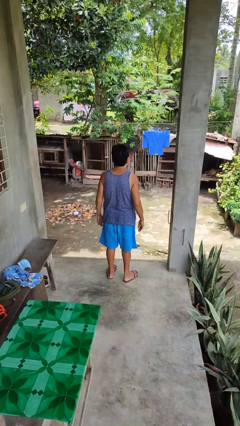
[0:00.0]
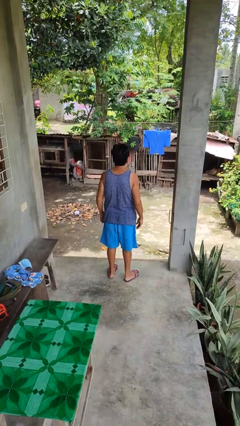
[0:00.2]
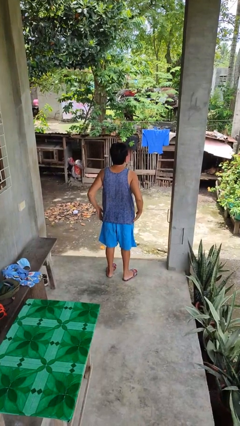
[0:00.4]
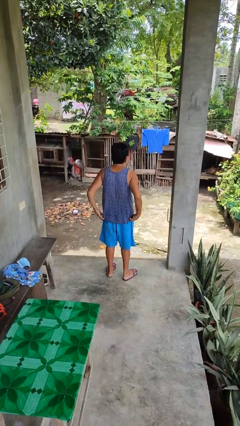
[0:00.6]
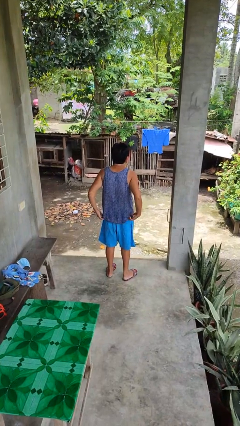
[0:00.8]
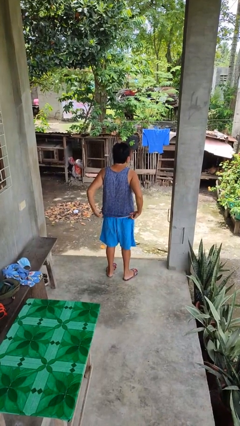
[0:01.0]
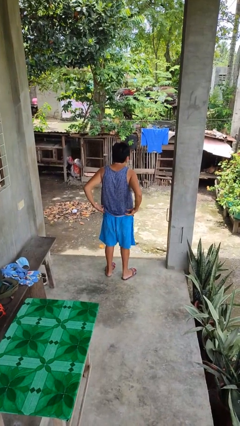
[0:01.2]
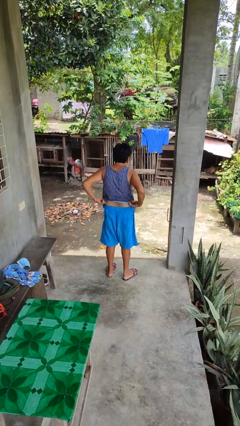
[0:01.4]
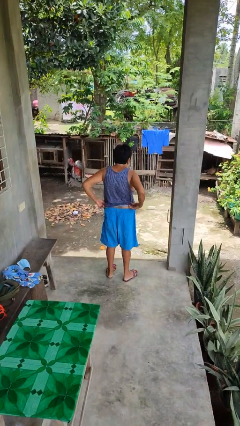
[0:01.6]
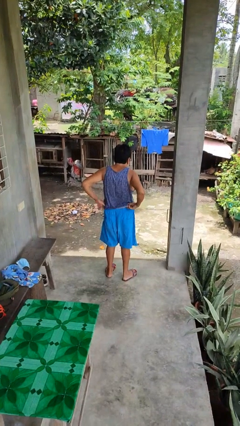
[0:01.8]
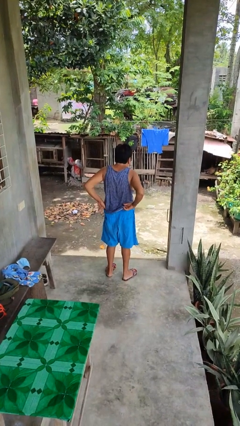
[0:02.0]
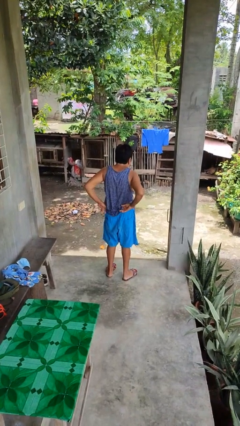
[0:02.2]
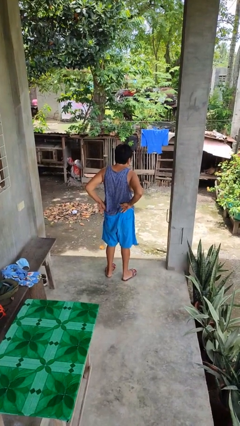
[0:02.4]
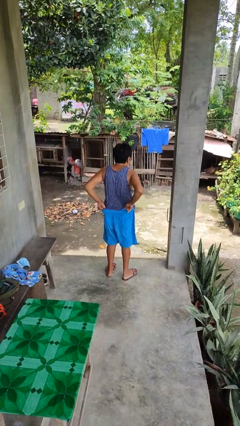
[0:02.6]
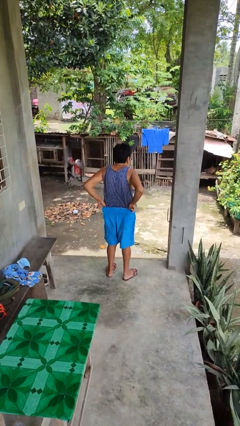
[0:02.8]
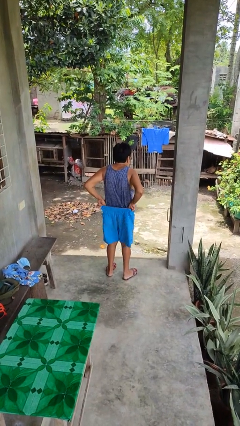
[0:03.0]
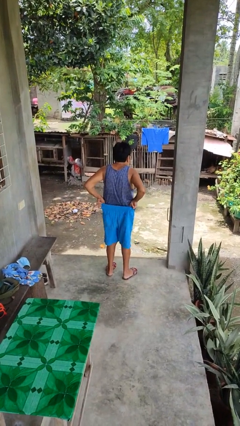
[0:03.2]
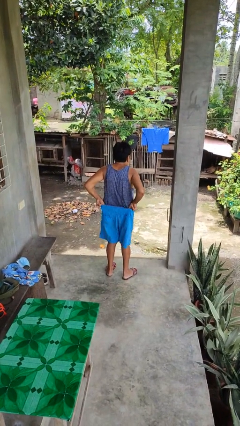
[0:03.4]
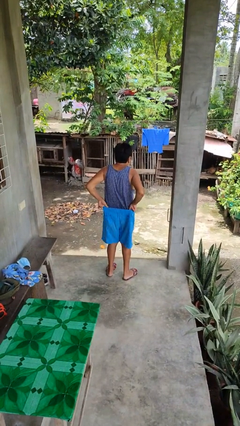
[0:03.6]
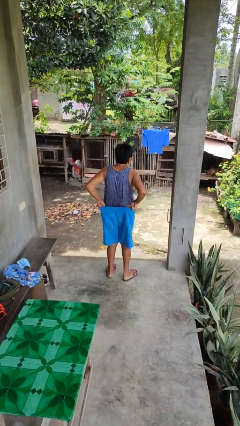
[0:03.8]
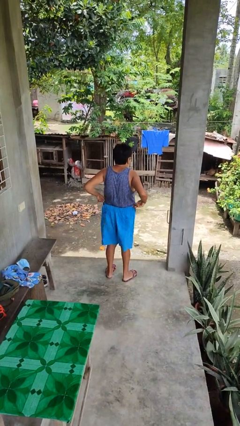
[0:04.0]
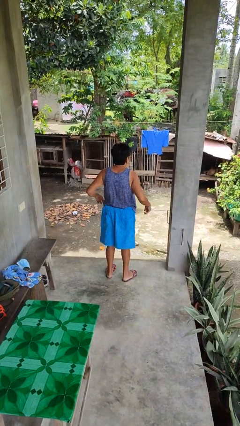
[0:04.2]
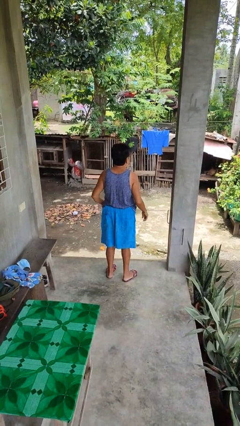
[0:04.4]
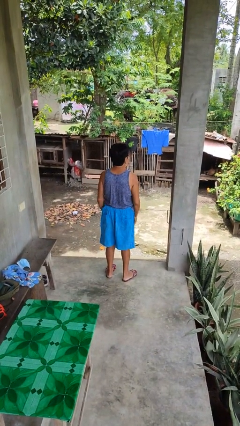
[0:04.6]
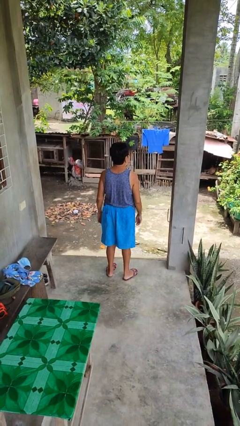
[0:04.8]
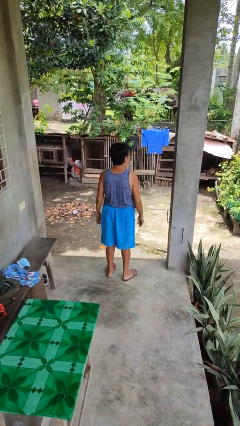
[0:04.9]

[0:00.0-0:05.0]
person tucks in shirt

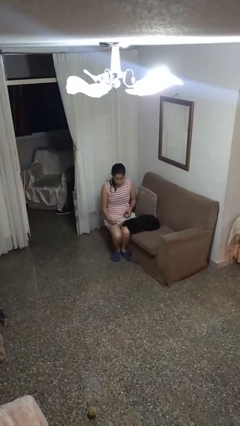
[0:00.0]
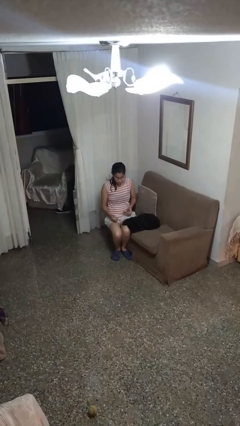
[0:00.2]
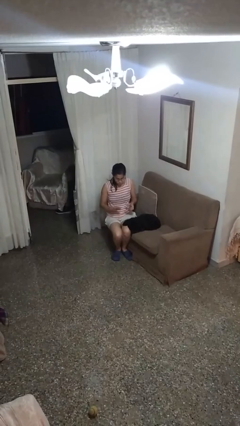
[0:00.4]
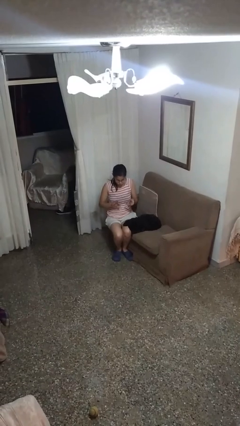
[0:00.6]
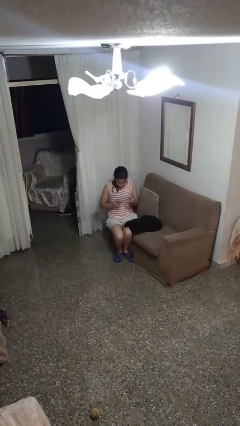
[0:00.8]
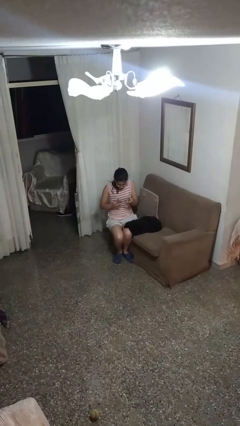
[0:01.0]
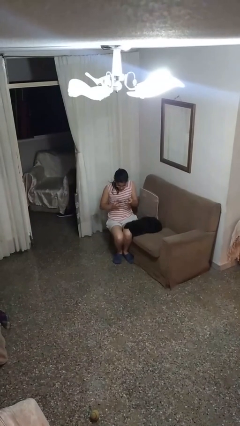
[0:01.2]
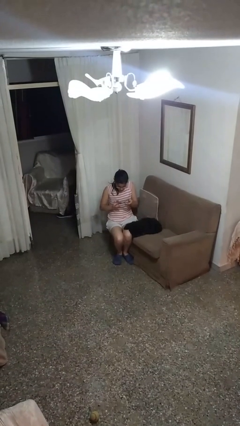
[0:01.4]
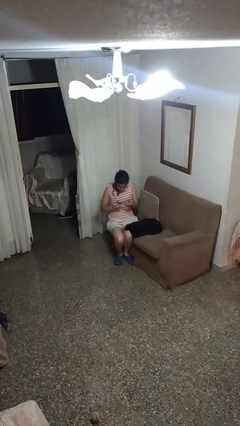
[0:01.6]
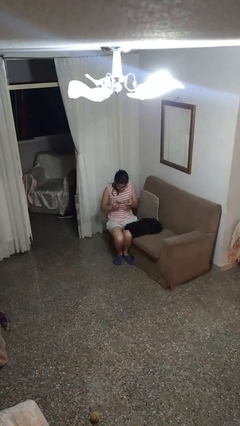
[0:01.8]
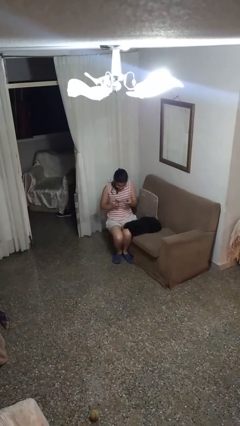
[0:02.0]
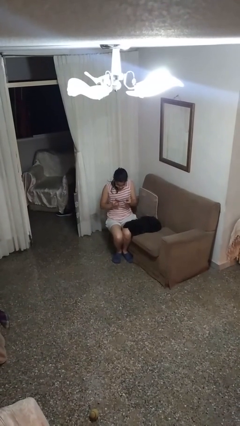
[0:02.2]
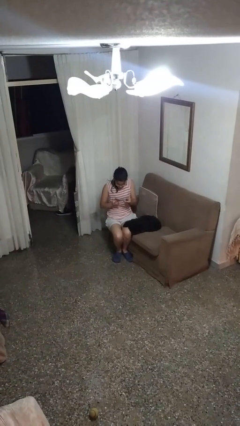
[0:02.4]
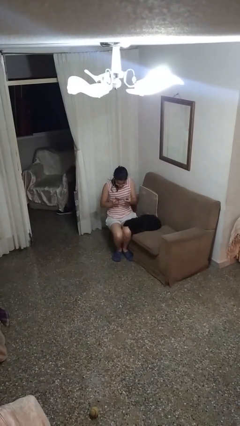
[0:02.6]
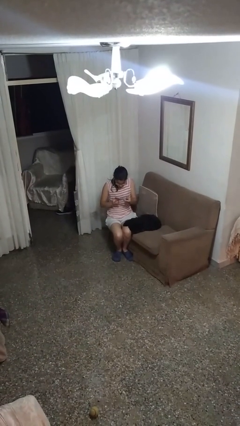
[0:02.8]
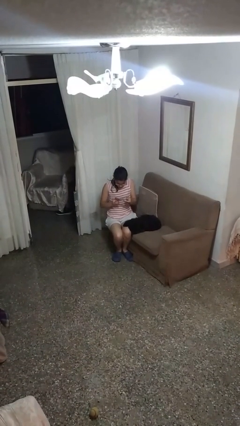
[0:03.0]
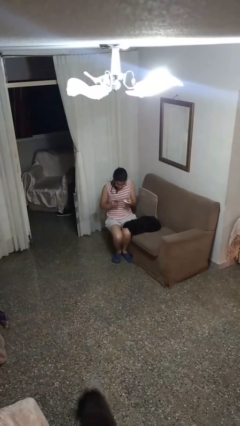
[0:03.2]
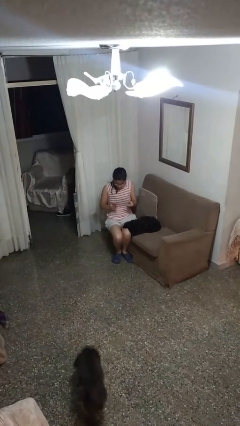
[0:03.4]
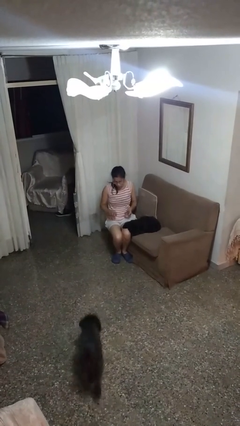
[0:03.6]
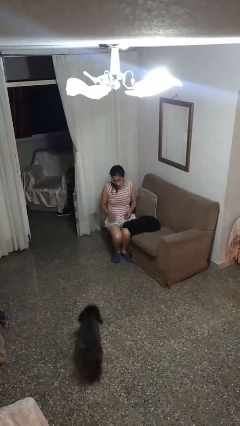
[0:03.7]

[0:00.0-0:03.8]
person clips fingernails

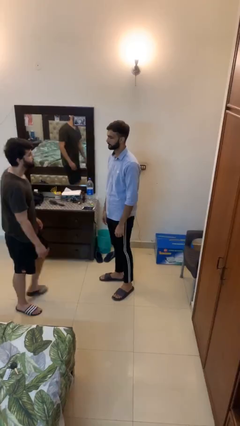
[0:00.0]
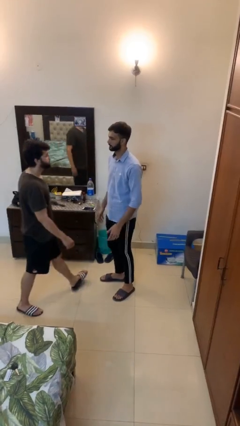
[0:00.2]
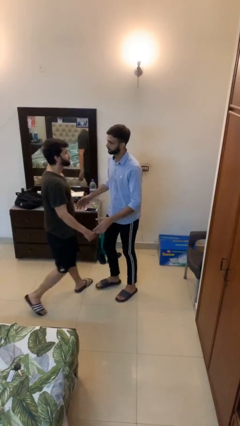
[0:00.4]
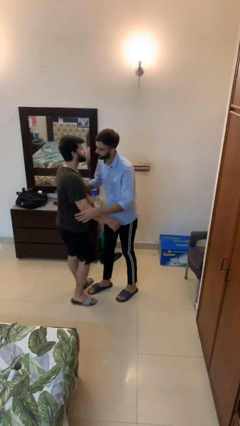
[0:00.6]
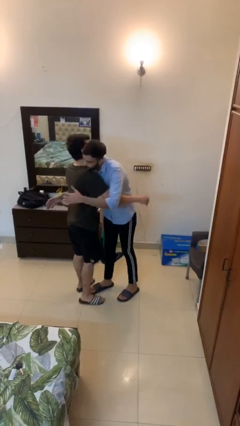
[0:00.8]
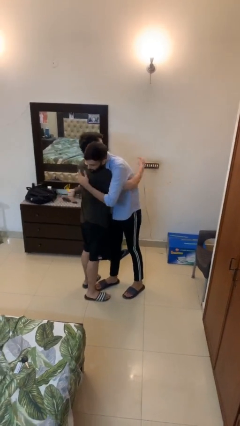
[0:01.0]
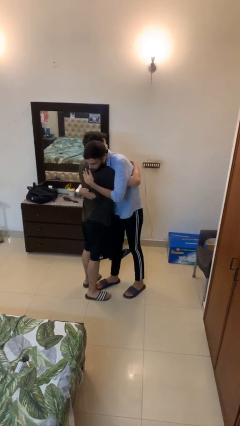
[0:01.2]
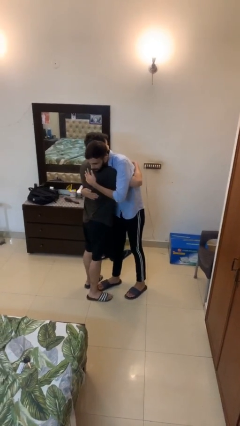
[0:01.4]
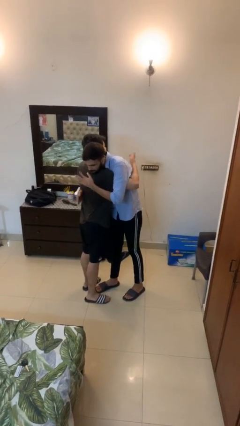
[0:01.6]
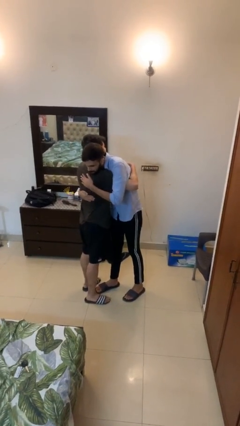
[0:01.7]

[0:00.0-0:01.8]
person embraces person

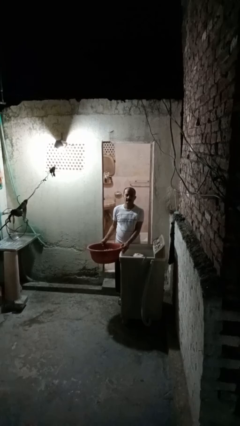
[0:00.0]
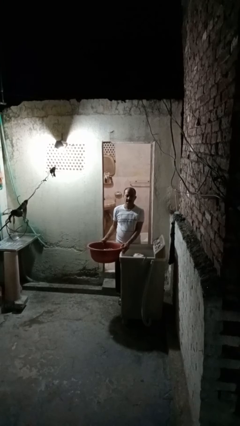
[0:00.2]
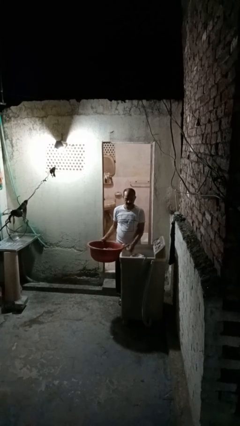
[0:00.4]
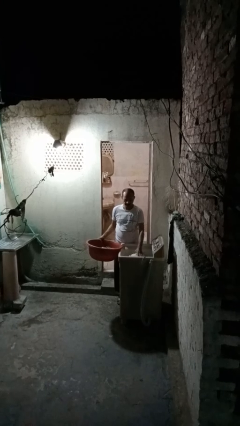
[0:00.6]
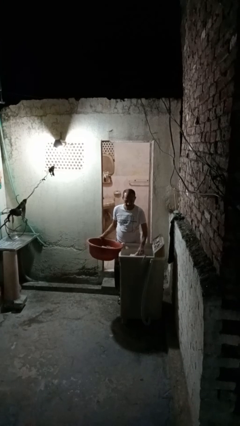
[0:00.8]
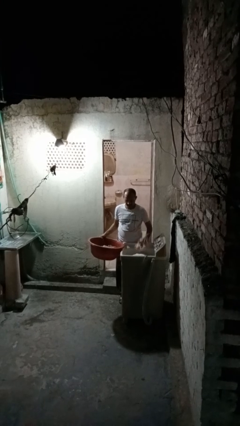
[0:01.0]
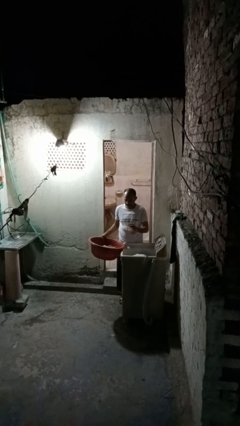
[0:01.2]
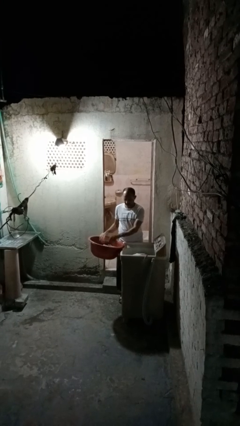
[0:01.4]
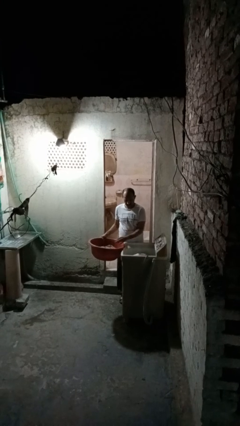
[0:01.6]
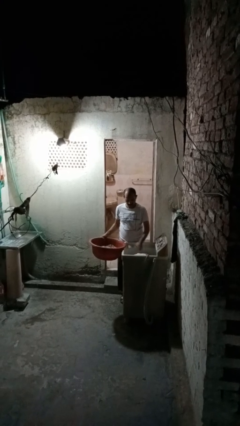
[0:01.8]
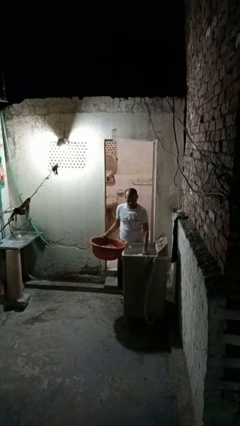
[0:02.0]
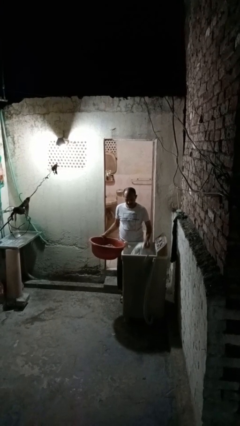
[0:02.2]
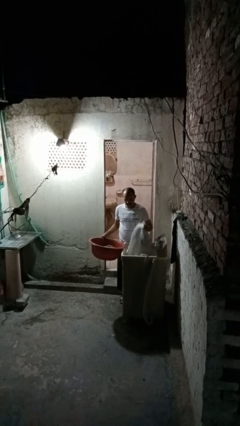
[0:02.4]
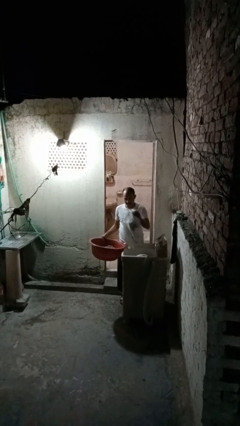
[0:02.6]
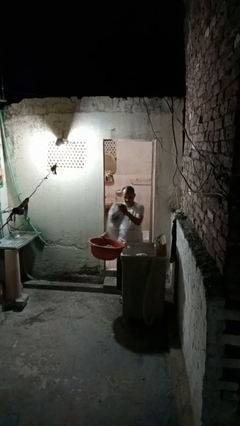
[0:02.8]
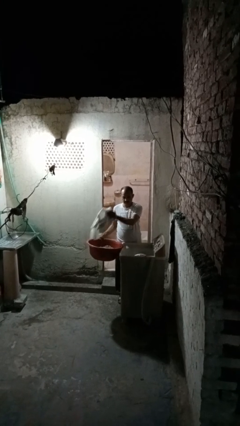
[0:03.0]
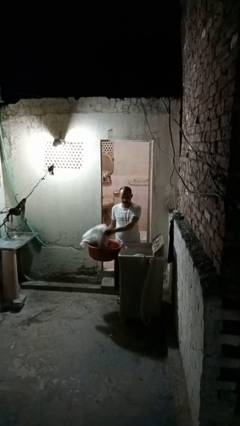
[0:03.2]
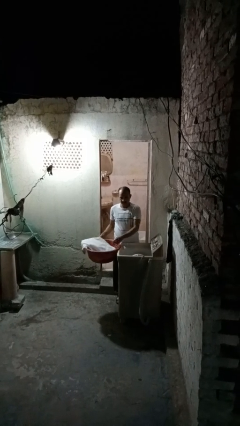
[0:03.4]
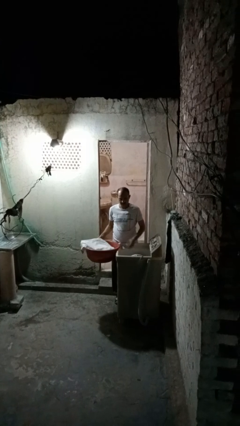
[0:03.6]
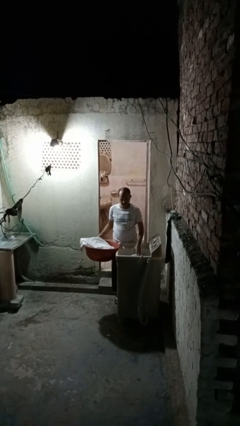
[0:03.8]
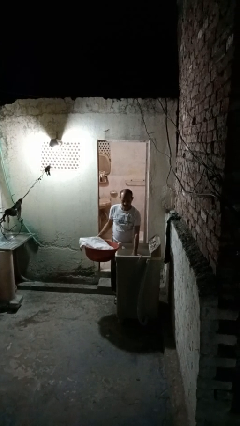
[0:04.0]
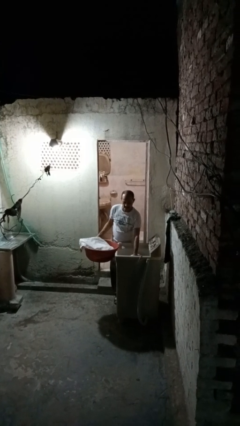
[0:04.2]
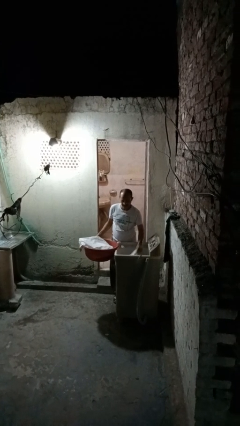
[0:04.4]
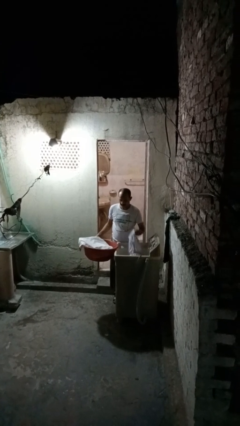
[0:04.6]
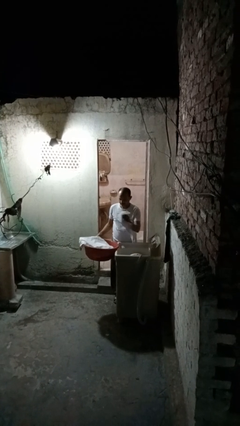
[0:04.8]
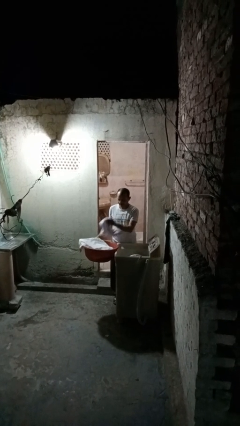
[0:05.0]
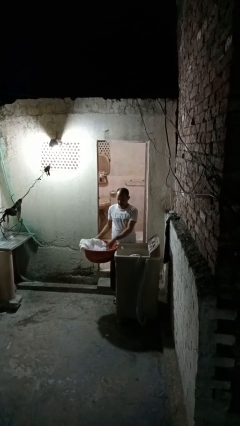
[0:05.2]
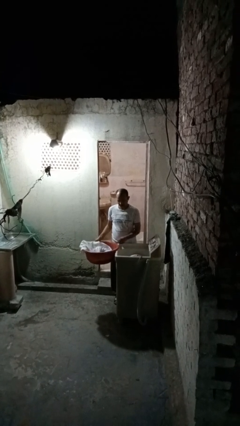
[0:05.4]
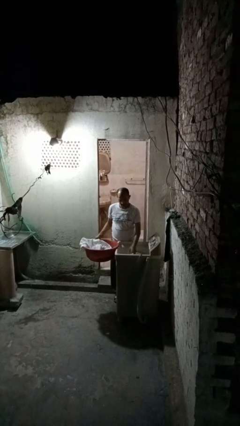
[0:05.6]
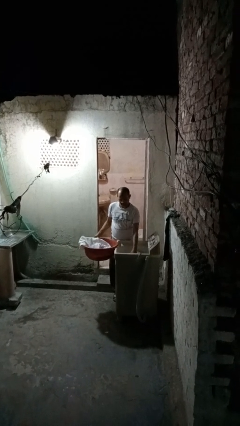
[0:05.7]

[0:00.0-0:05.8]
person unloads clotheswasher

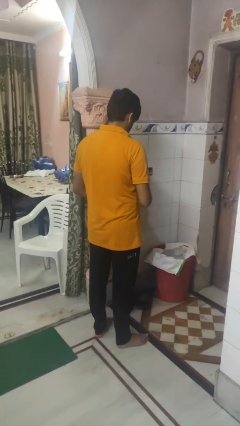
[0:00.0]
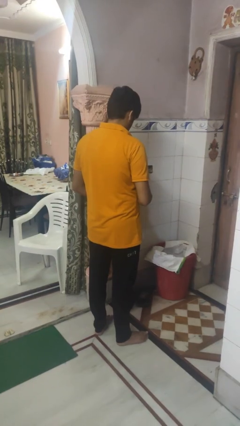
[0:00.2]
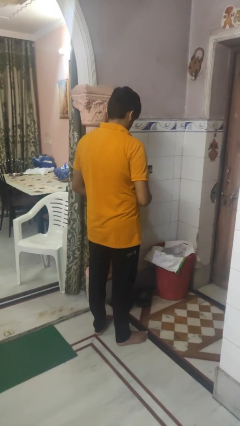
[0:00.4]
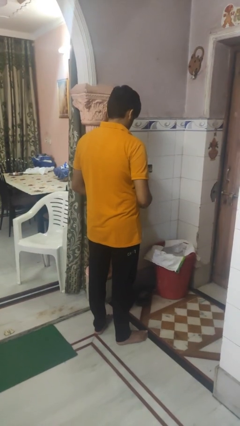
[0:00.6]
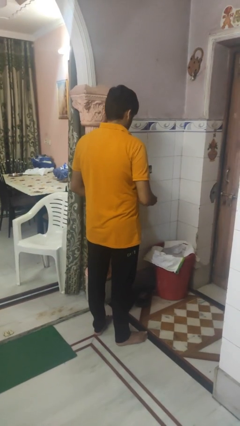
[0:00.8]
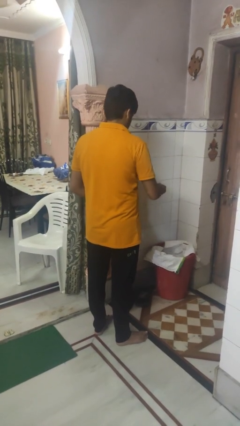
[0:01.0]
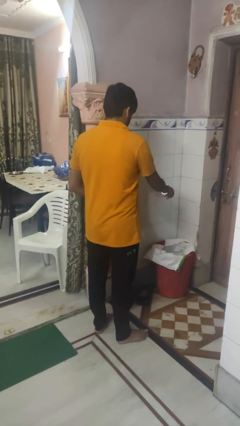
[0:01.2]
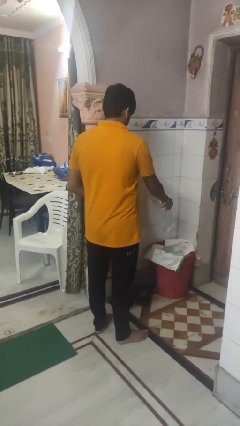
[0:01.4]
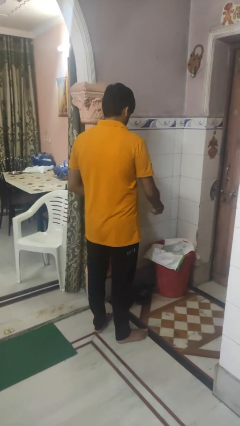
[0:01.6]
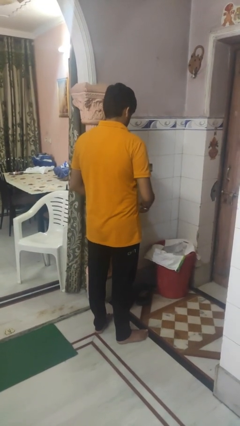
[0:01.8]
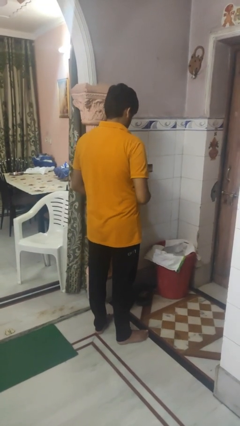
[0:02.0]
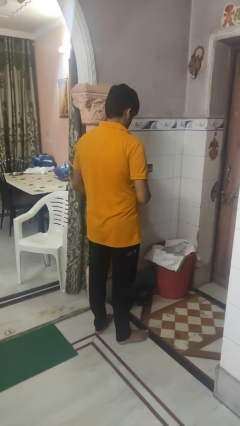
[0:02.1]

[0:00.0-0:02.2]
person discards trash
